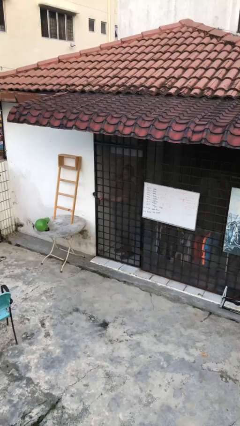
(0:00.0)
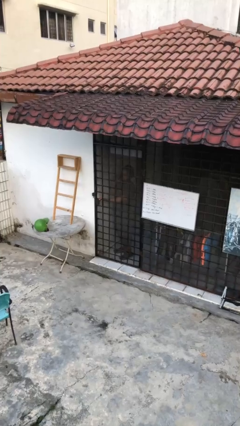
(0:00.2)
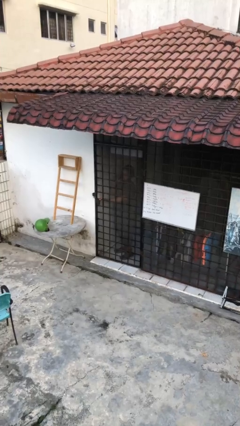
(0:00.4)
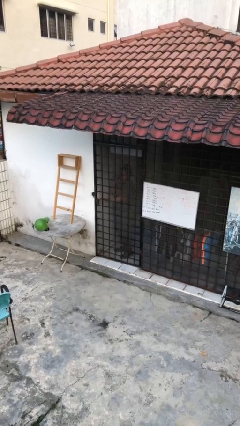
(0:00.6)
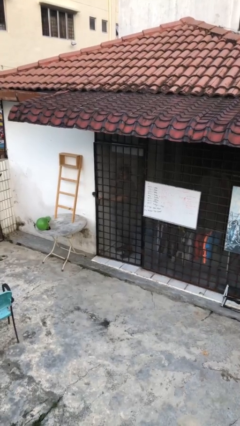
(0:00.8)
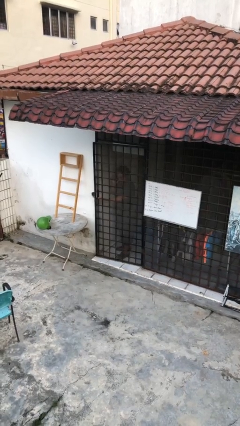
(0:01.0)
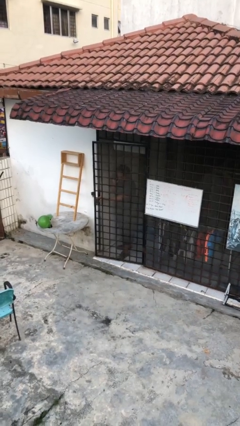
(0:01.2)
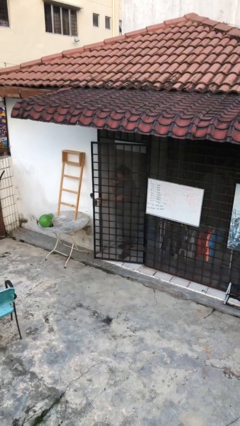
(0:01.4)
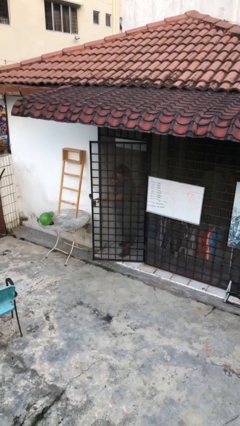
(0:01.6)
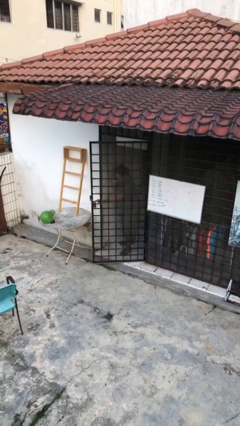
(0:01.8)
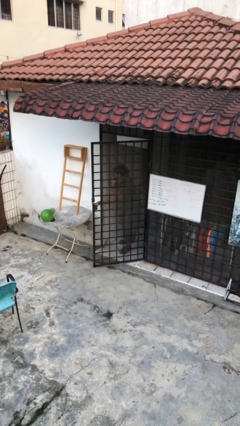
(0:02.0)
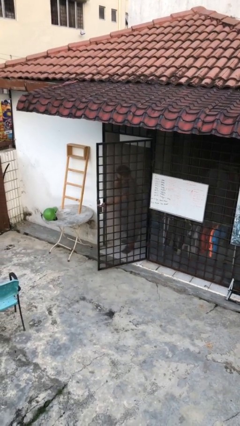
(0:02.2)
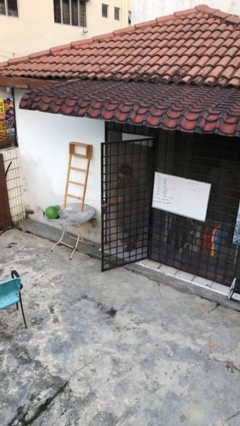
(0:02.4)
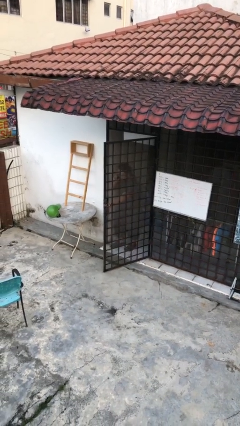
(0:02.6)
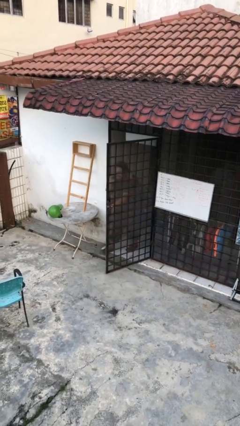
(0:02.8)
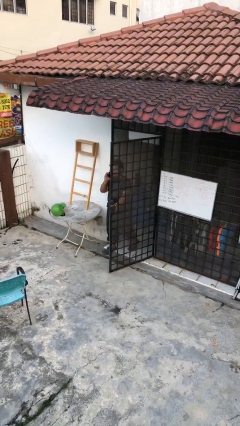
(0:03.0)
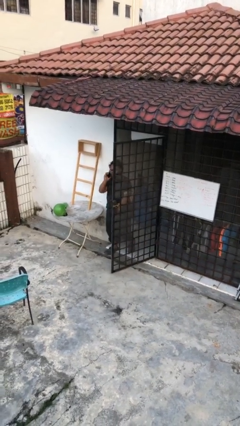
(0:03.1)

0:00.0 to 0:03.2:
person opens facility door

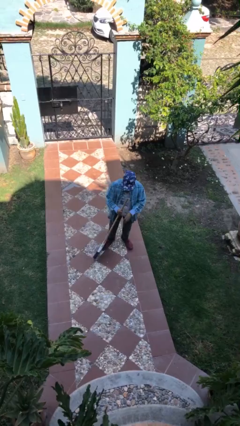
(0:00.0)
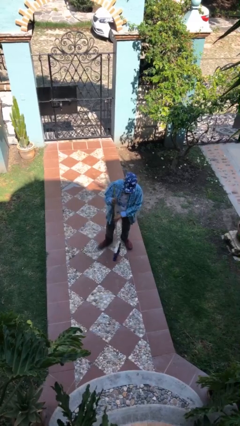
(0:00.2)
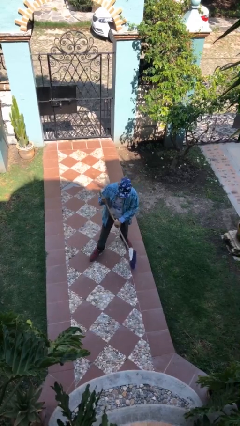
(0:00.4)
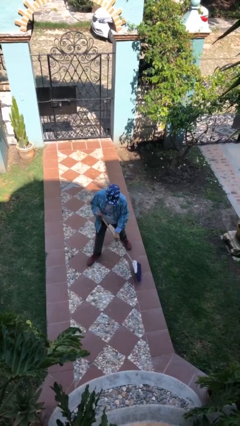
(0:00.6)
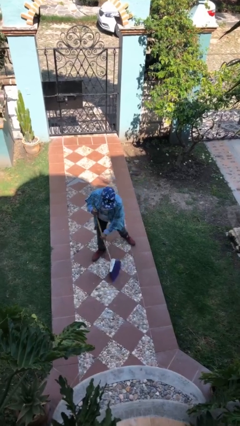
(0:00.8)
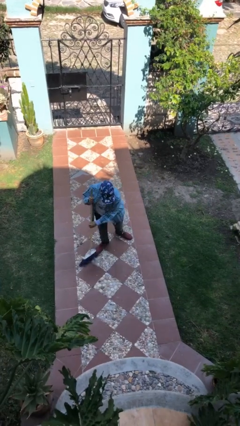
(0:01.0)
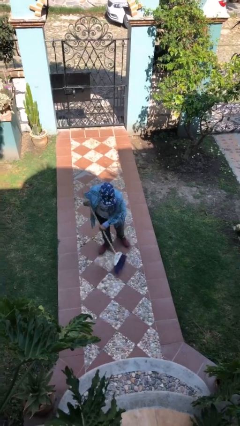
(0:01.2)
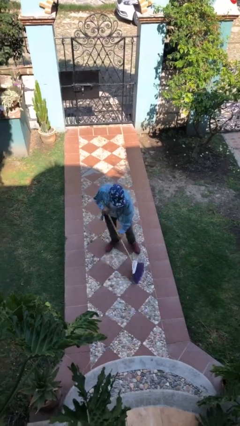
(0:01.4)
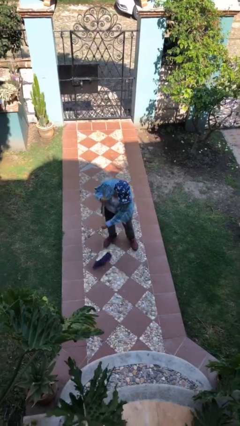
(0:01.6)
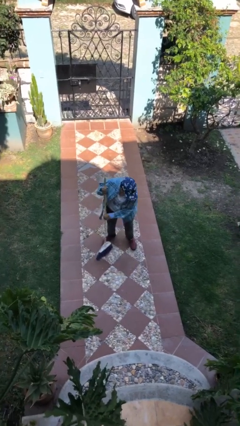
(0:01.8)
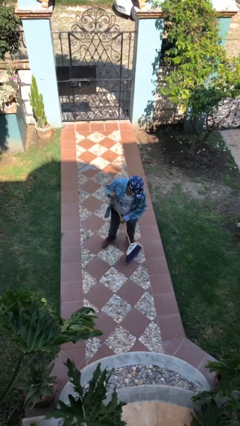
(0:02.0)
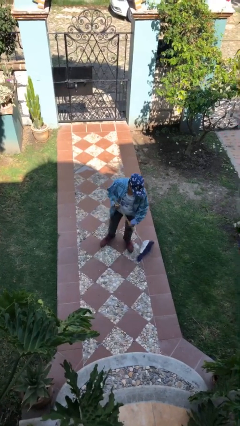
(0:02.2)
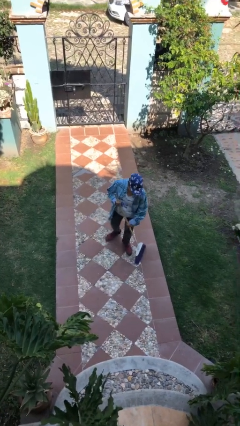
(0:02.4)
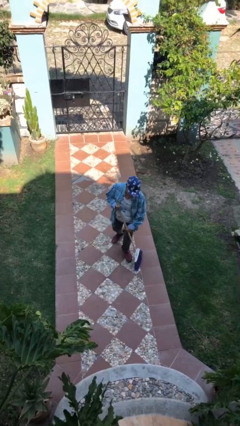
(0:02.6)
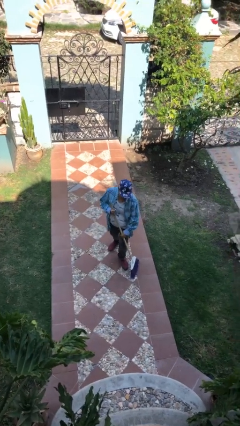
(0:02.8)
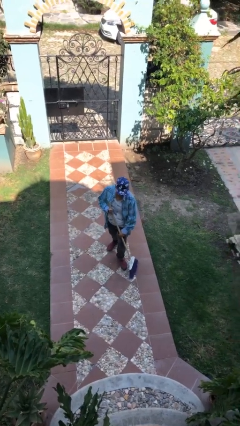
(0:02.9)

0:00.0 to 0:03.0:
person sweeps floor

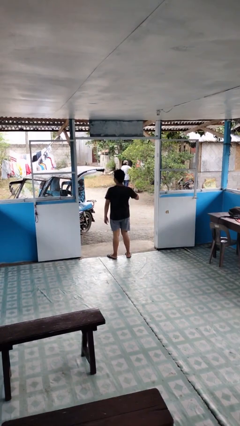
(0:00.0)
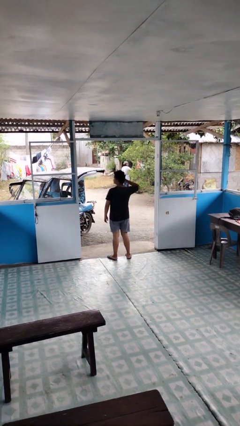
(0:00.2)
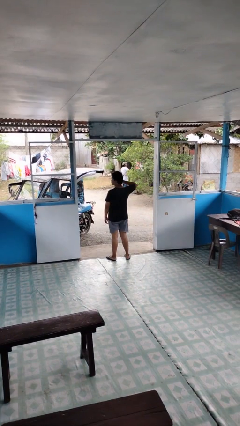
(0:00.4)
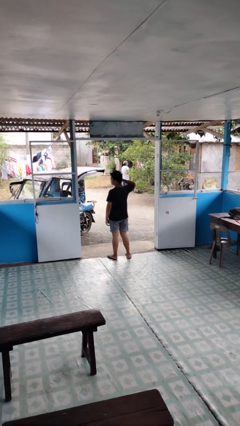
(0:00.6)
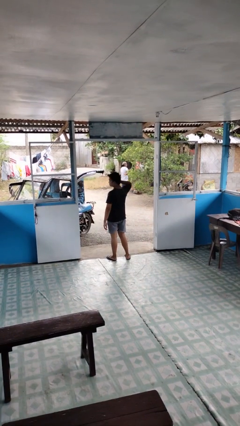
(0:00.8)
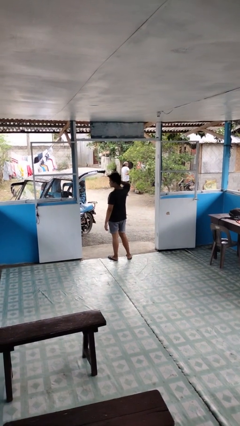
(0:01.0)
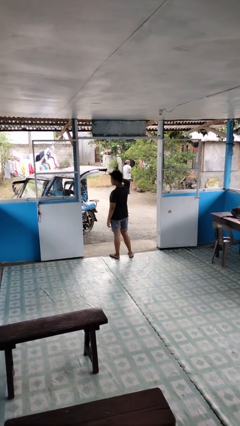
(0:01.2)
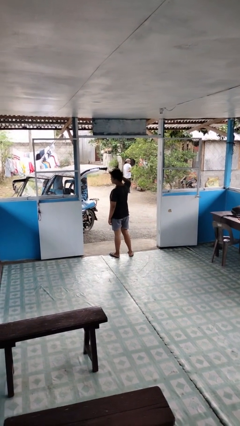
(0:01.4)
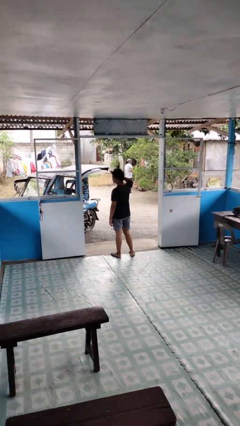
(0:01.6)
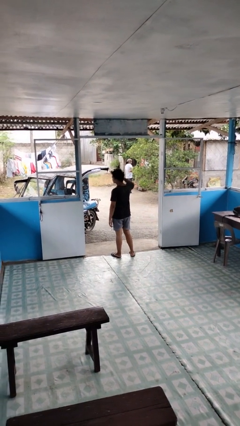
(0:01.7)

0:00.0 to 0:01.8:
person touches earlobe

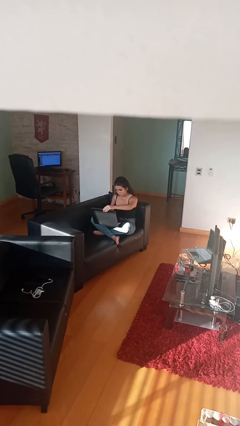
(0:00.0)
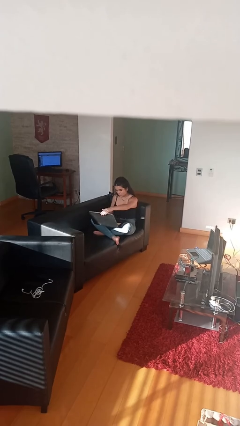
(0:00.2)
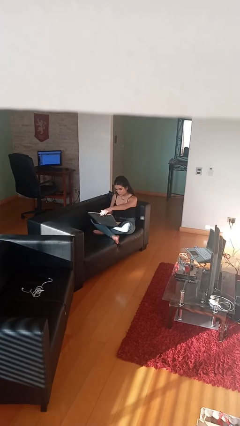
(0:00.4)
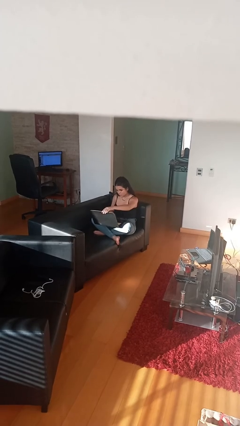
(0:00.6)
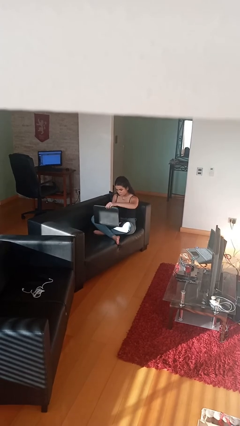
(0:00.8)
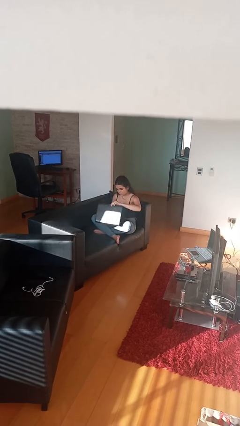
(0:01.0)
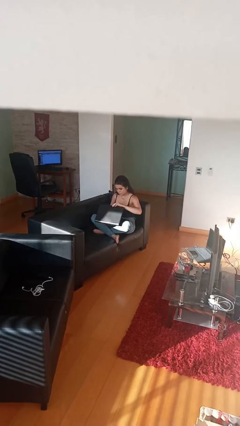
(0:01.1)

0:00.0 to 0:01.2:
person interacts with laptop

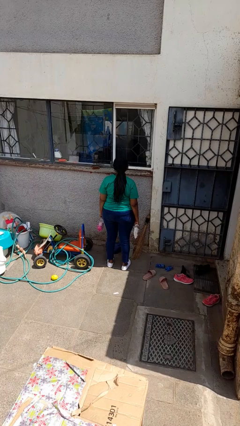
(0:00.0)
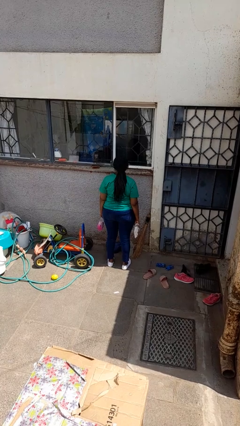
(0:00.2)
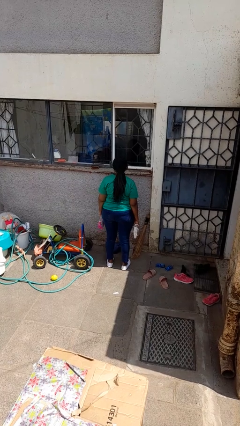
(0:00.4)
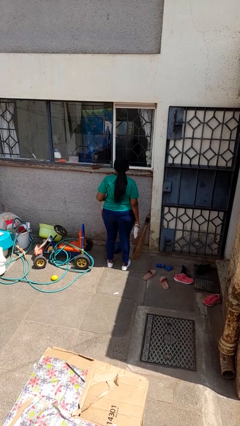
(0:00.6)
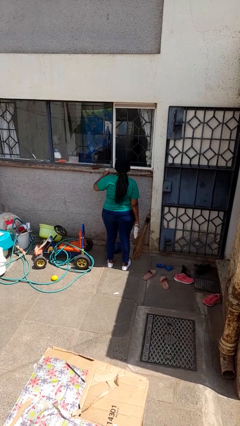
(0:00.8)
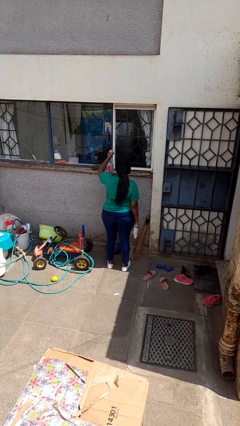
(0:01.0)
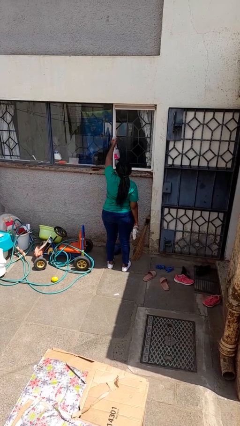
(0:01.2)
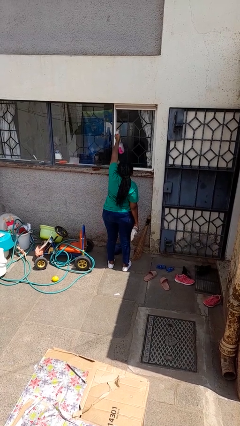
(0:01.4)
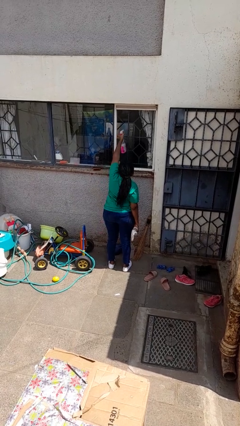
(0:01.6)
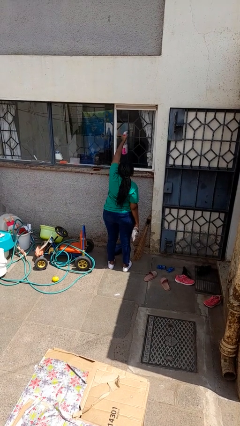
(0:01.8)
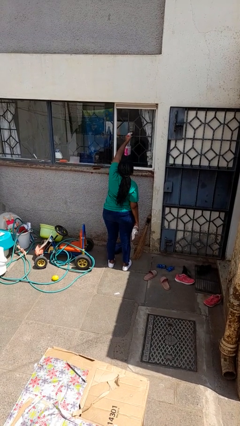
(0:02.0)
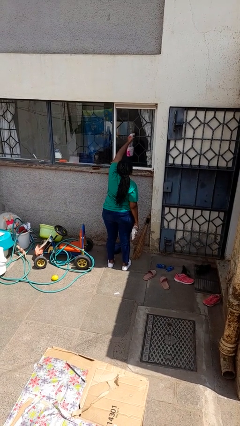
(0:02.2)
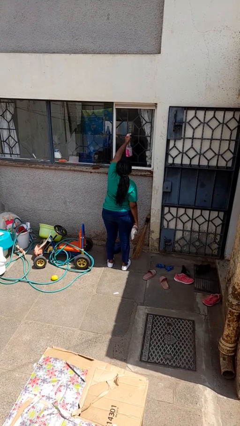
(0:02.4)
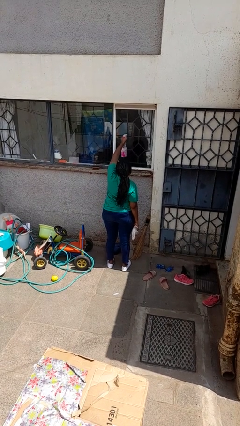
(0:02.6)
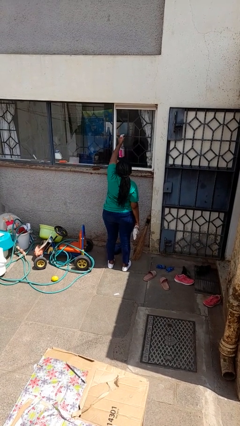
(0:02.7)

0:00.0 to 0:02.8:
person sprays from bottle

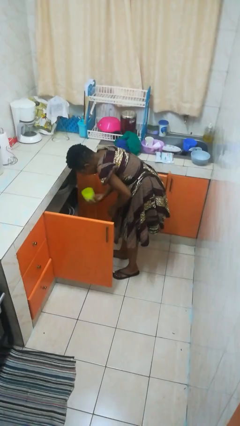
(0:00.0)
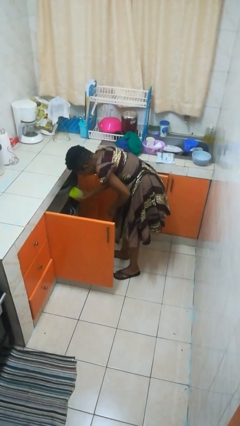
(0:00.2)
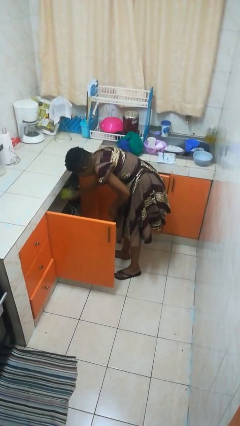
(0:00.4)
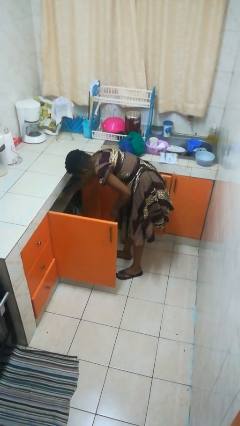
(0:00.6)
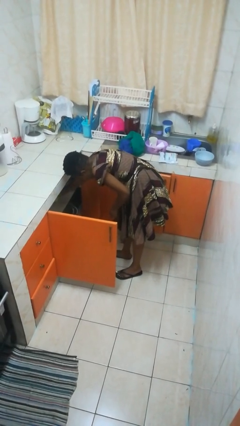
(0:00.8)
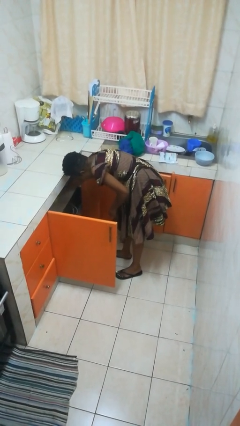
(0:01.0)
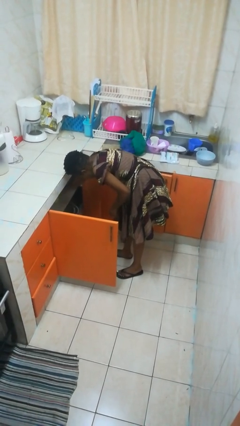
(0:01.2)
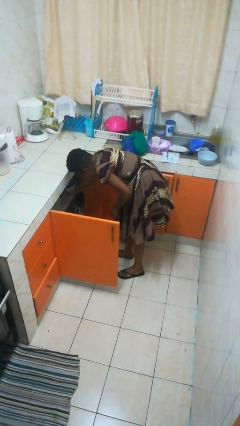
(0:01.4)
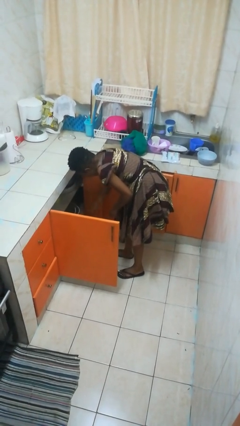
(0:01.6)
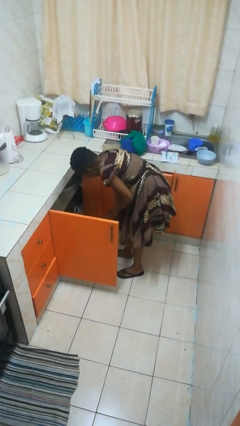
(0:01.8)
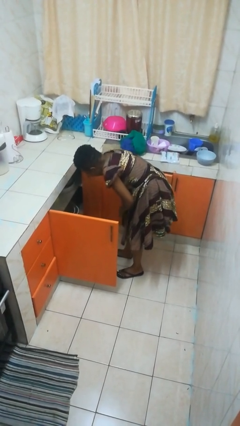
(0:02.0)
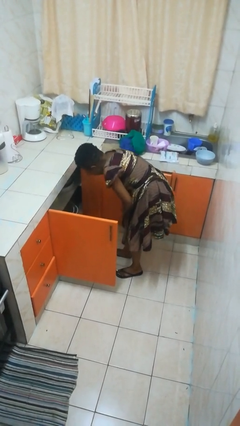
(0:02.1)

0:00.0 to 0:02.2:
person puts object in cabinet

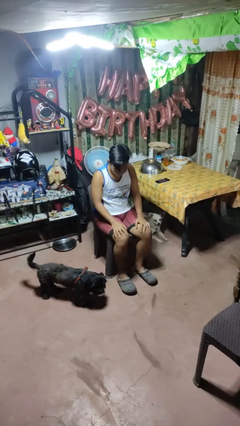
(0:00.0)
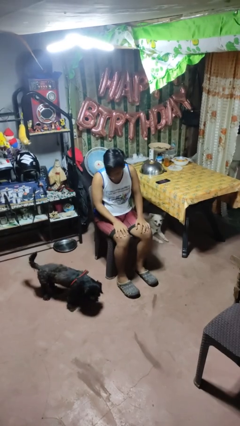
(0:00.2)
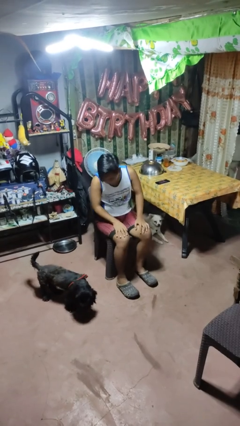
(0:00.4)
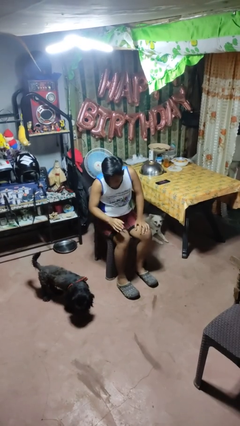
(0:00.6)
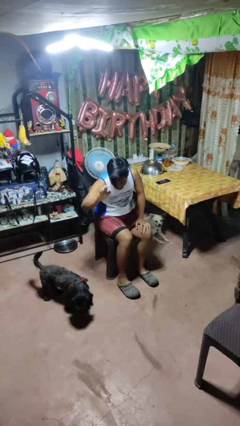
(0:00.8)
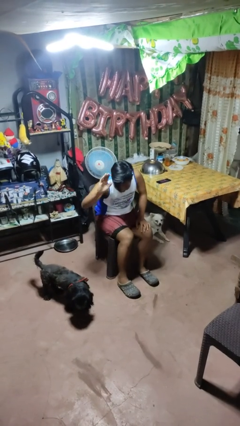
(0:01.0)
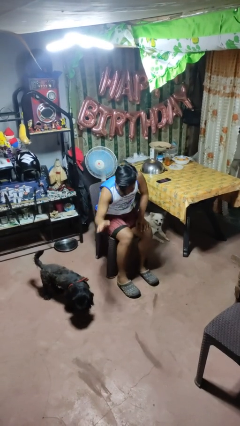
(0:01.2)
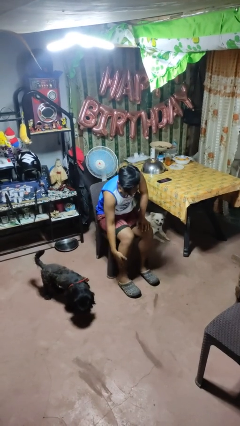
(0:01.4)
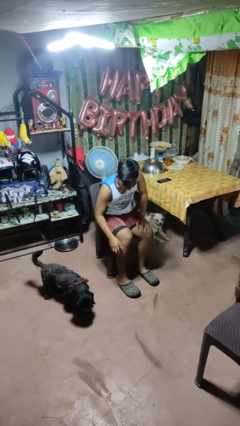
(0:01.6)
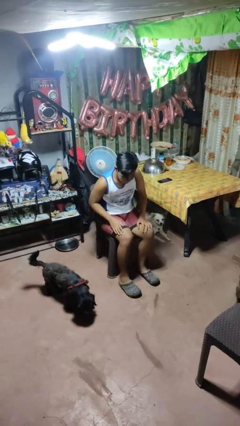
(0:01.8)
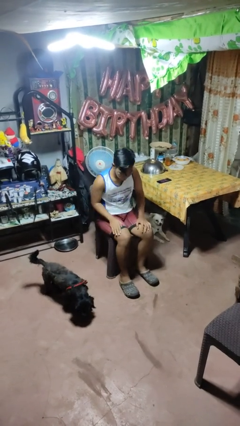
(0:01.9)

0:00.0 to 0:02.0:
person swats bug

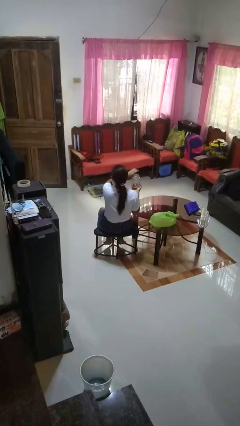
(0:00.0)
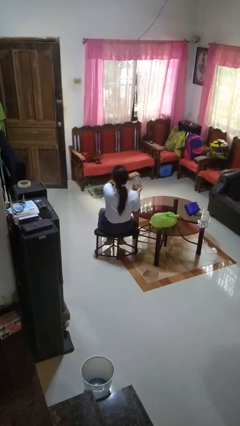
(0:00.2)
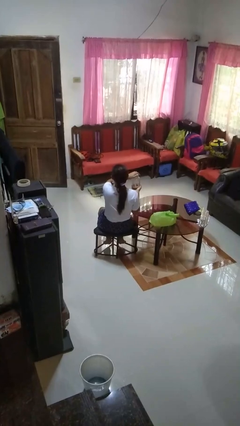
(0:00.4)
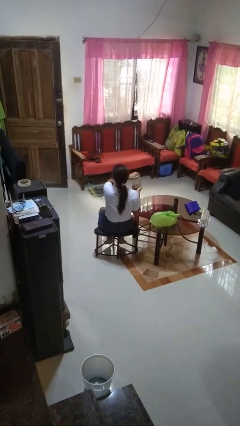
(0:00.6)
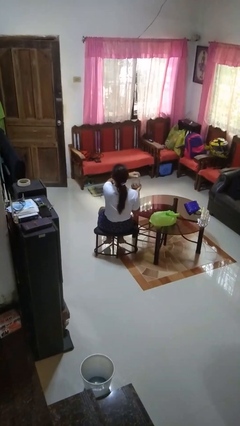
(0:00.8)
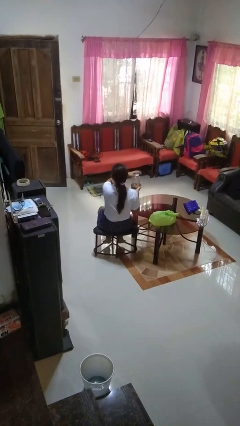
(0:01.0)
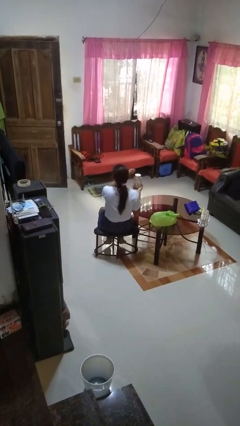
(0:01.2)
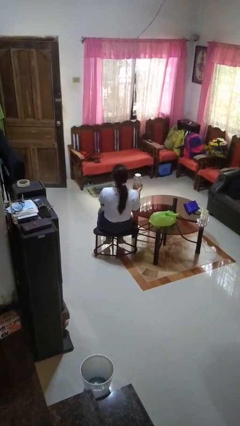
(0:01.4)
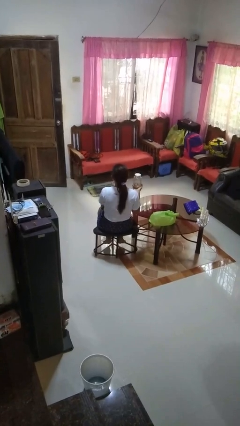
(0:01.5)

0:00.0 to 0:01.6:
person closes jar
